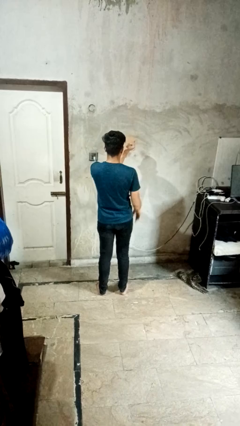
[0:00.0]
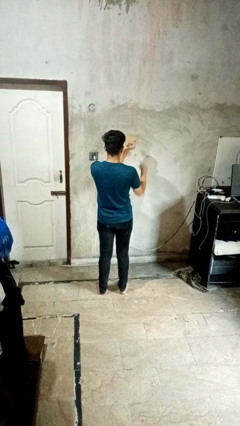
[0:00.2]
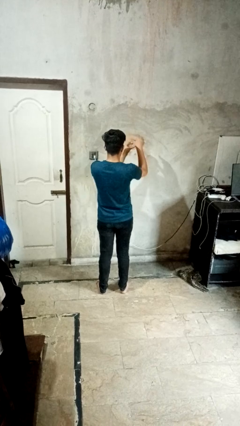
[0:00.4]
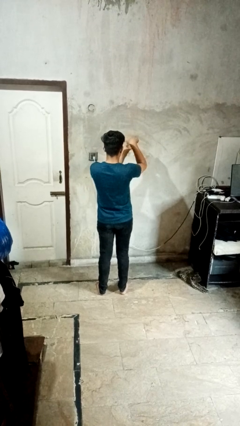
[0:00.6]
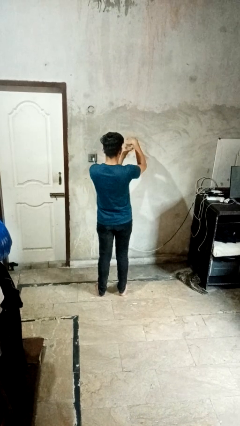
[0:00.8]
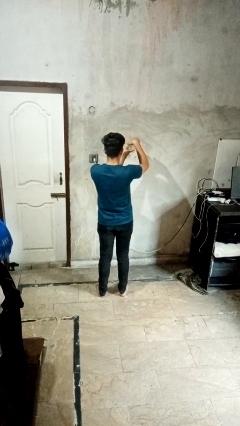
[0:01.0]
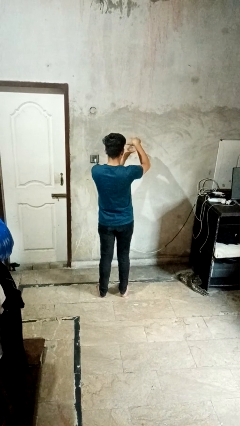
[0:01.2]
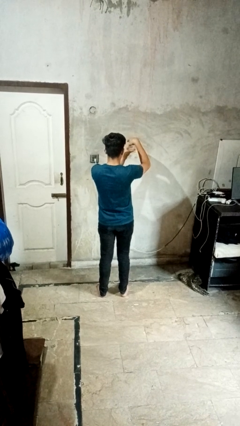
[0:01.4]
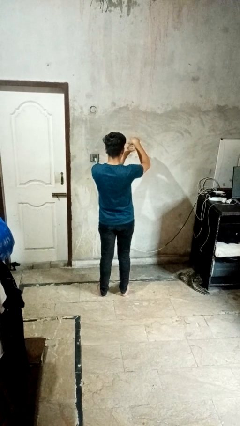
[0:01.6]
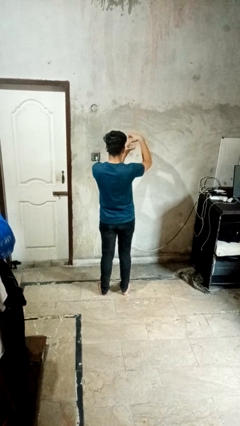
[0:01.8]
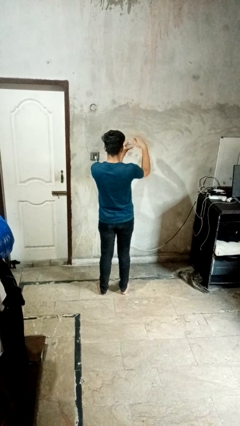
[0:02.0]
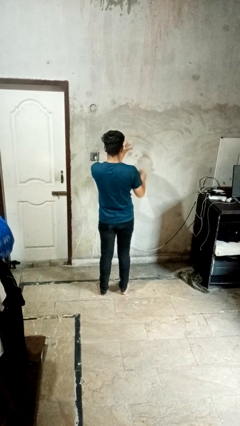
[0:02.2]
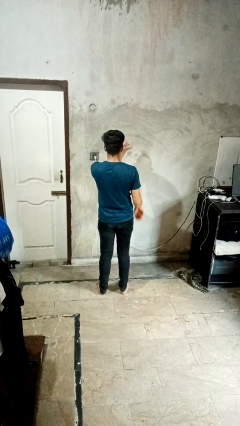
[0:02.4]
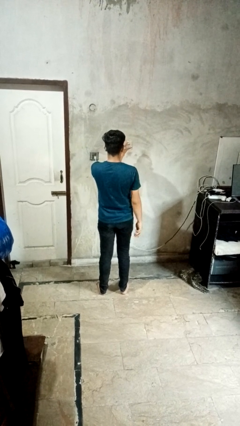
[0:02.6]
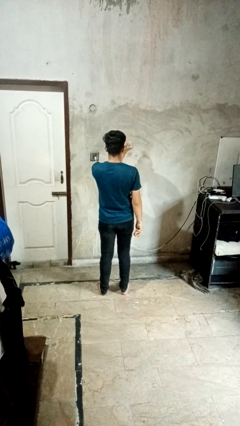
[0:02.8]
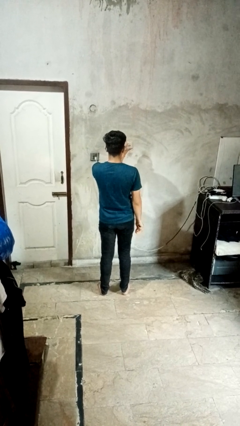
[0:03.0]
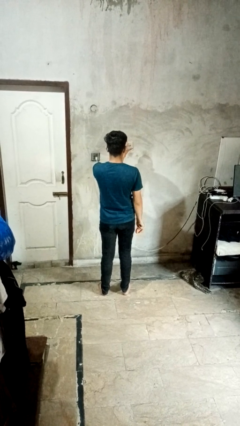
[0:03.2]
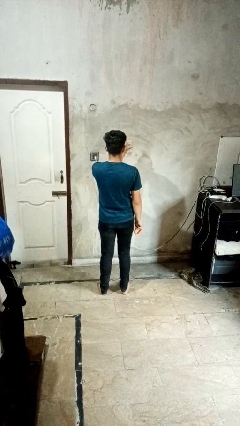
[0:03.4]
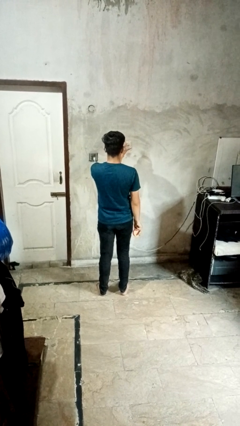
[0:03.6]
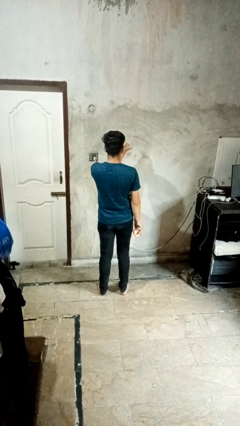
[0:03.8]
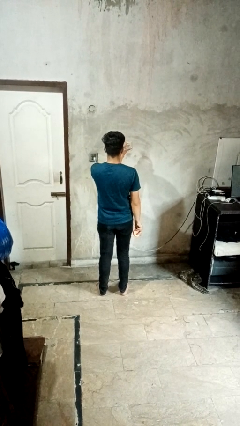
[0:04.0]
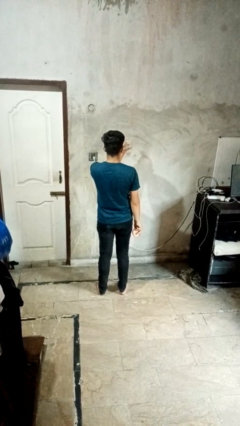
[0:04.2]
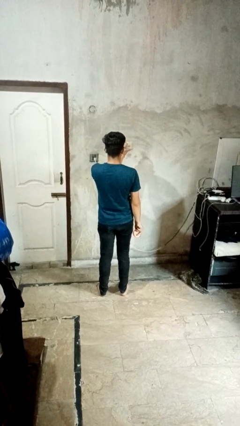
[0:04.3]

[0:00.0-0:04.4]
person opens jar

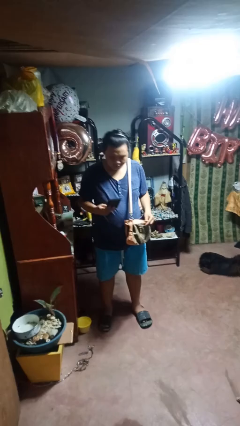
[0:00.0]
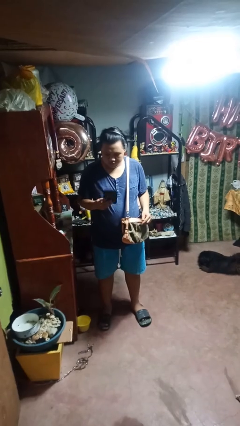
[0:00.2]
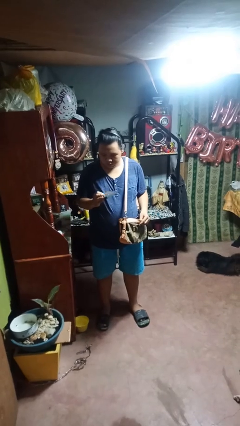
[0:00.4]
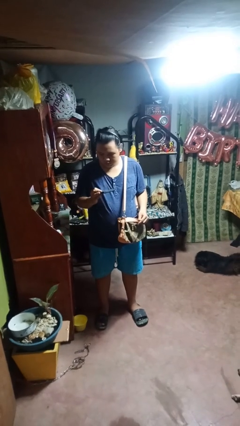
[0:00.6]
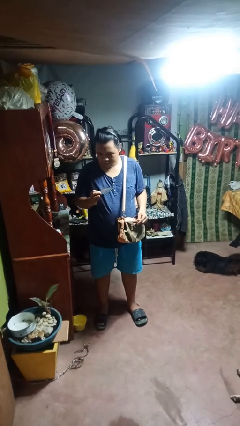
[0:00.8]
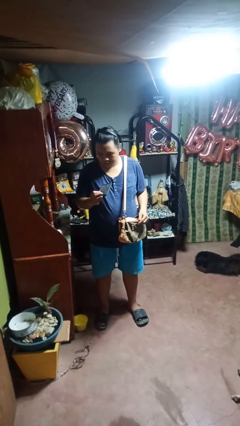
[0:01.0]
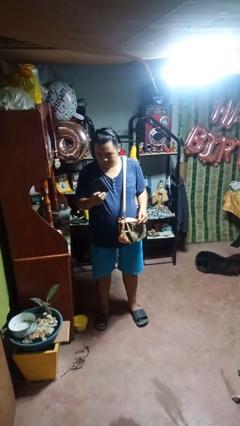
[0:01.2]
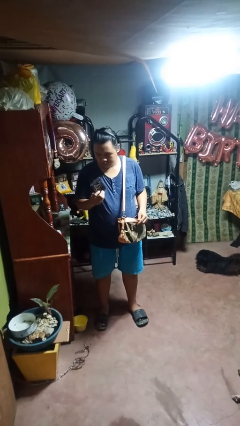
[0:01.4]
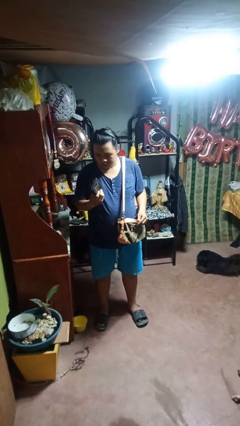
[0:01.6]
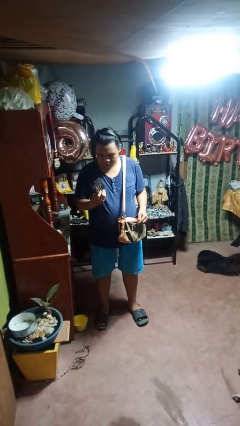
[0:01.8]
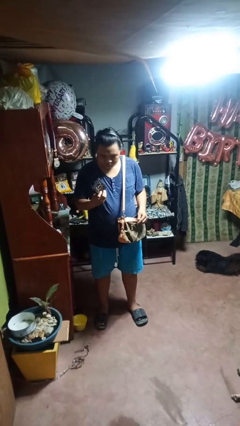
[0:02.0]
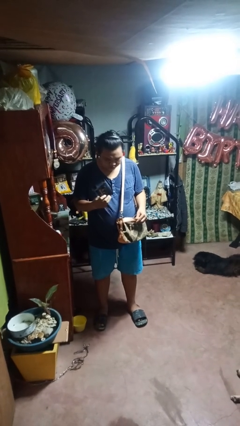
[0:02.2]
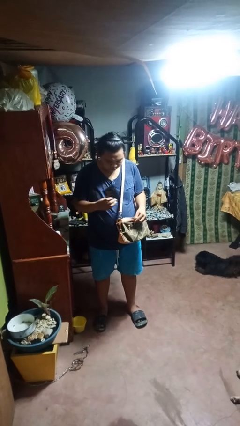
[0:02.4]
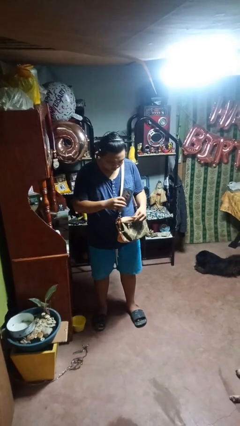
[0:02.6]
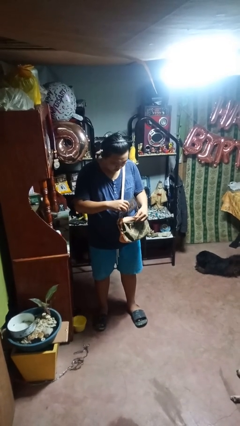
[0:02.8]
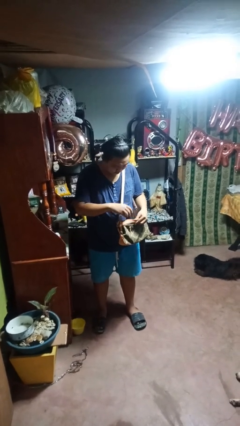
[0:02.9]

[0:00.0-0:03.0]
person takes object from purse

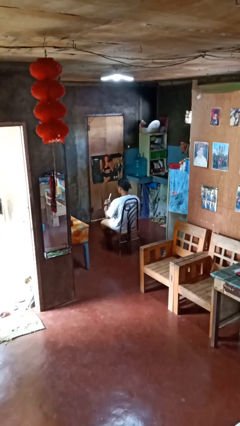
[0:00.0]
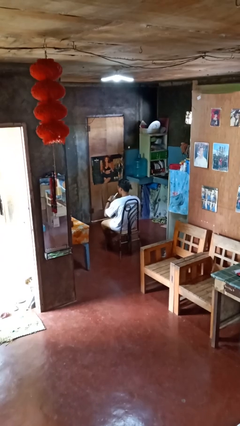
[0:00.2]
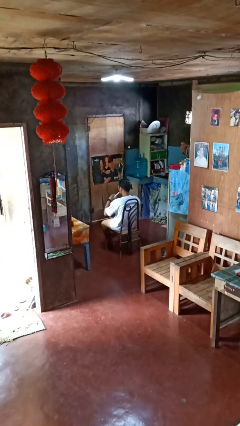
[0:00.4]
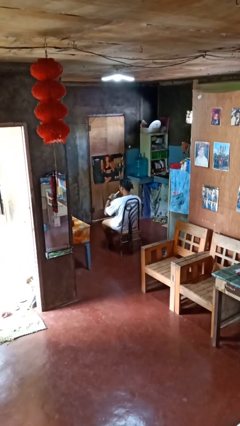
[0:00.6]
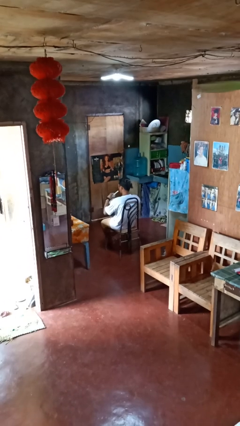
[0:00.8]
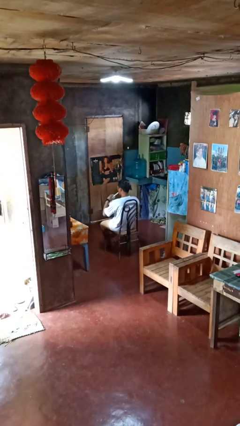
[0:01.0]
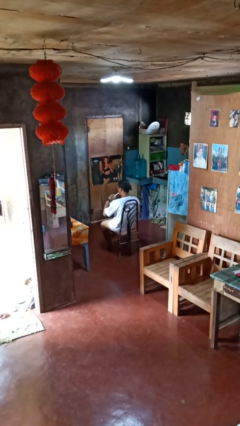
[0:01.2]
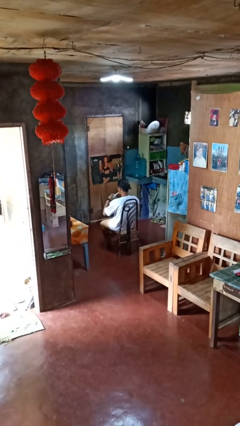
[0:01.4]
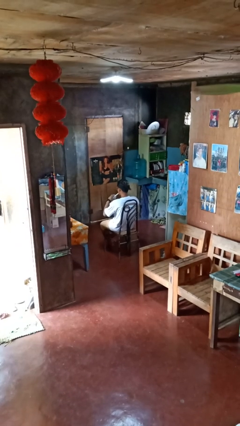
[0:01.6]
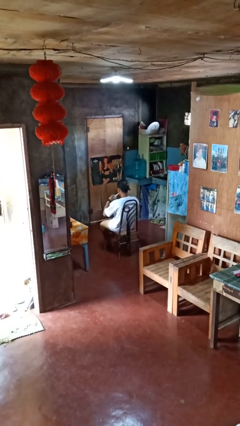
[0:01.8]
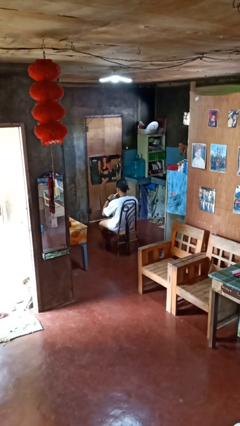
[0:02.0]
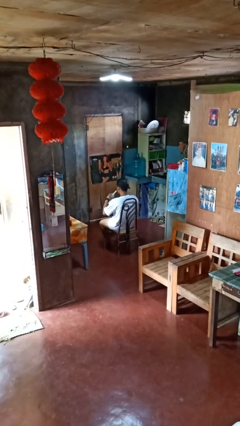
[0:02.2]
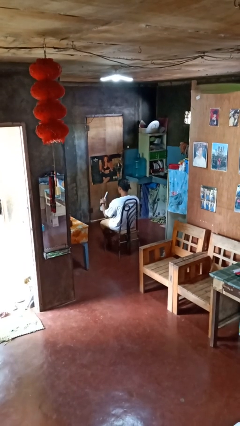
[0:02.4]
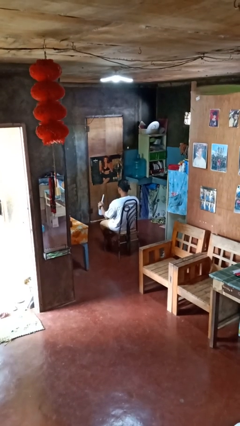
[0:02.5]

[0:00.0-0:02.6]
person drinks from straw

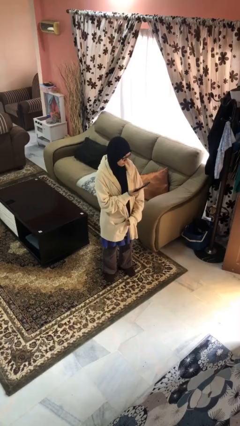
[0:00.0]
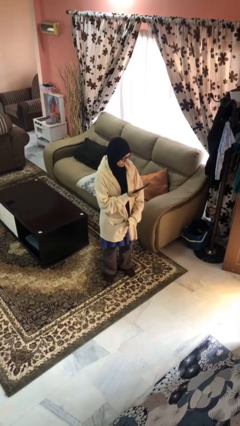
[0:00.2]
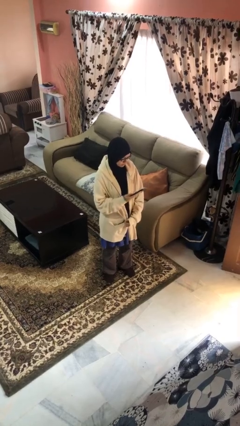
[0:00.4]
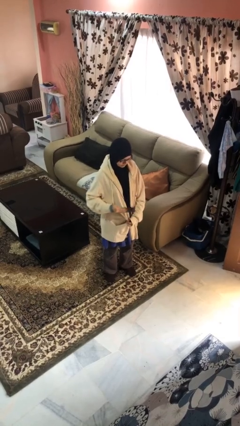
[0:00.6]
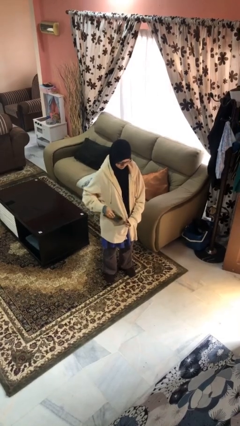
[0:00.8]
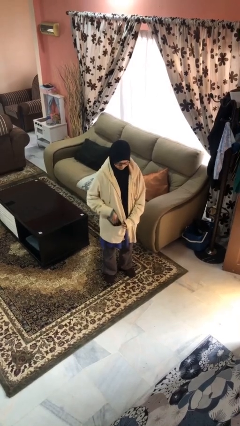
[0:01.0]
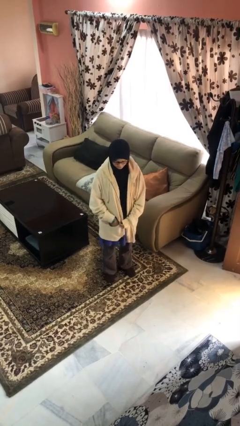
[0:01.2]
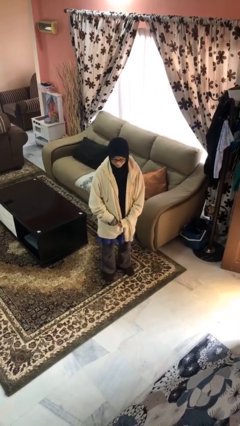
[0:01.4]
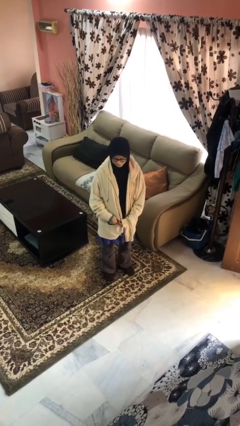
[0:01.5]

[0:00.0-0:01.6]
person puts phone into pocket

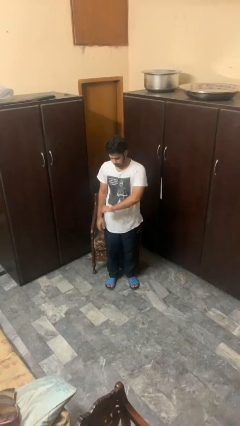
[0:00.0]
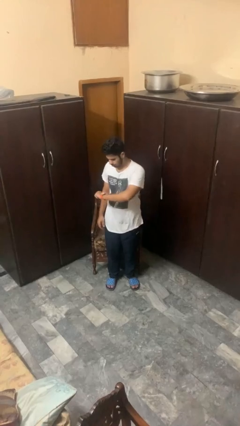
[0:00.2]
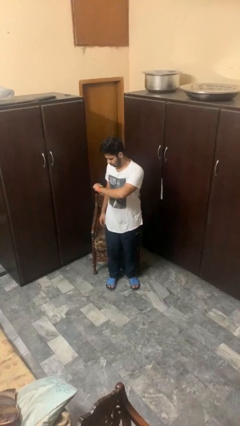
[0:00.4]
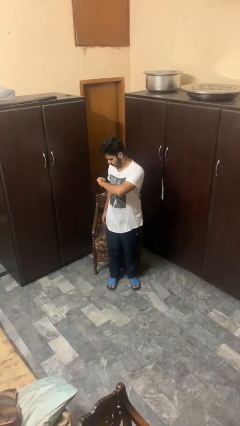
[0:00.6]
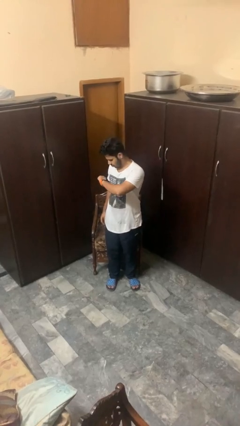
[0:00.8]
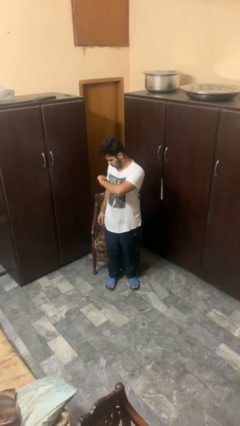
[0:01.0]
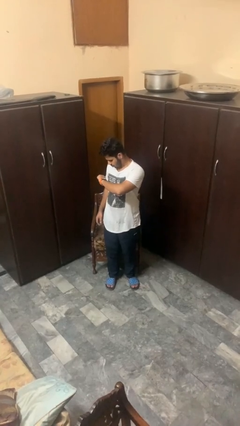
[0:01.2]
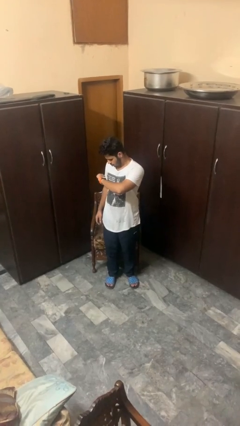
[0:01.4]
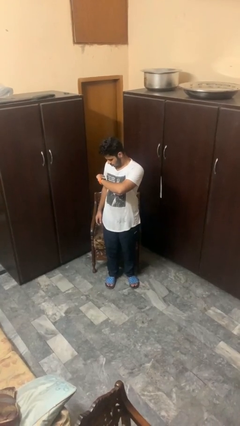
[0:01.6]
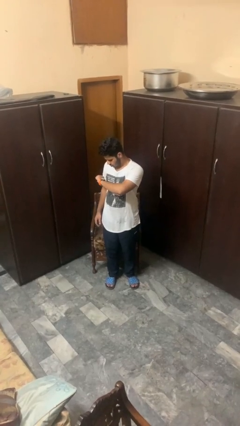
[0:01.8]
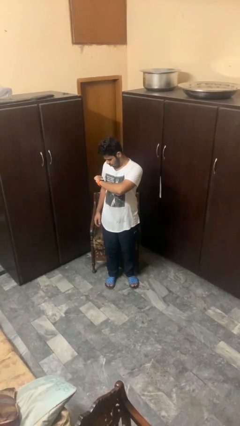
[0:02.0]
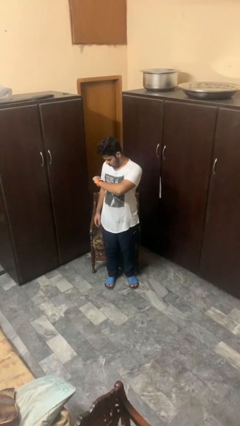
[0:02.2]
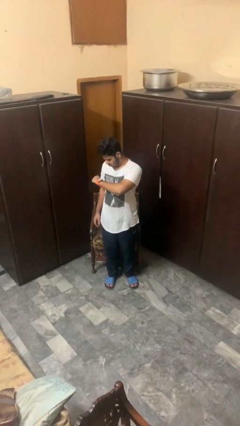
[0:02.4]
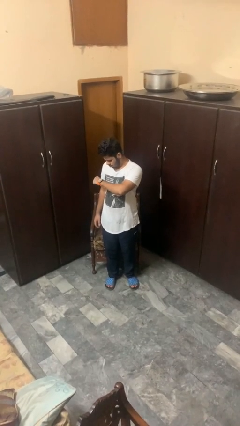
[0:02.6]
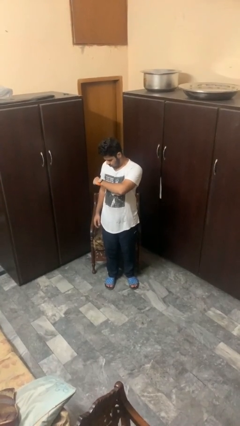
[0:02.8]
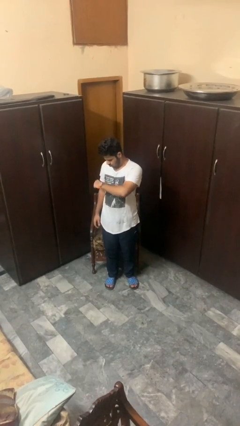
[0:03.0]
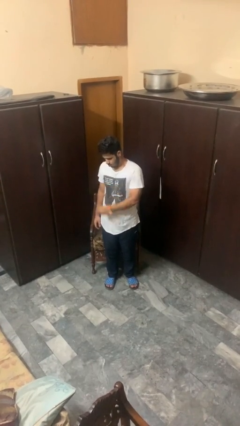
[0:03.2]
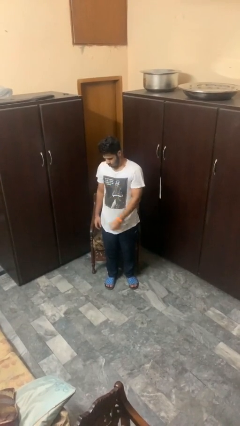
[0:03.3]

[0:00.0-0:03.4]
person looks at wristwatch

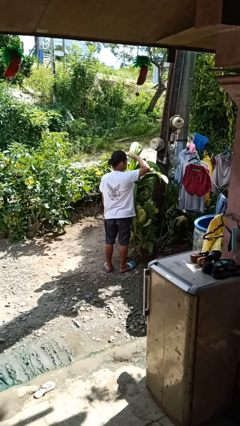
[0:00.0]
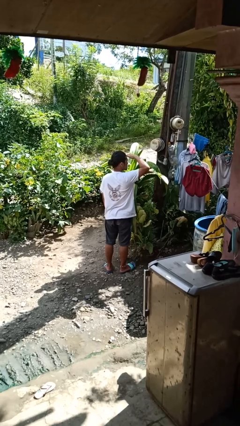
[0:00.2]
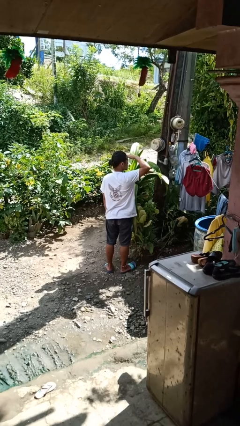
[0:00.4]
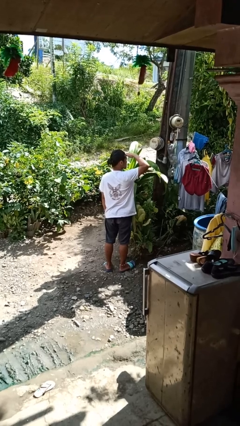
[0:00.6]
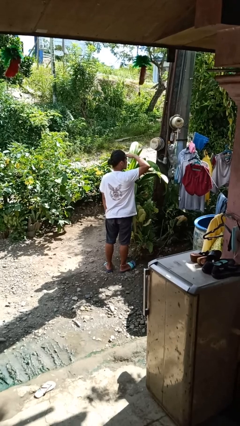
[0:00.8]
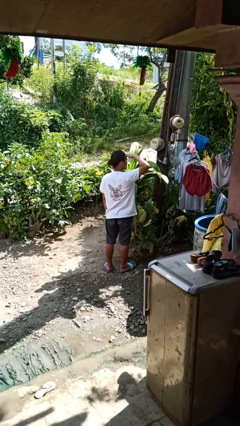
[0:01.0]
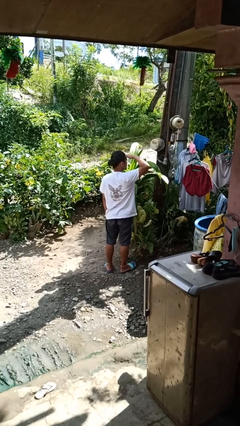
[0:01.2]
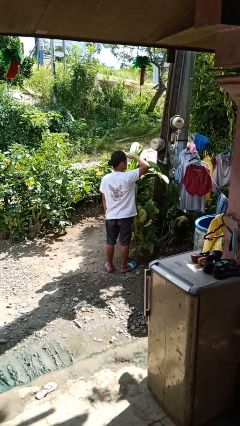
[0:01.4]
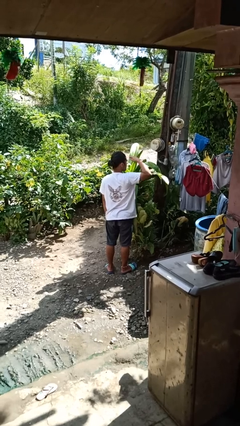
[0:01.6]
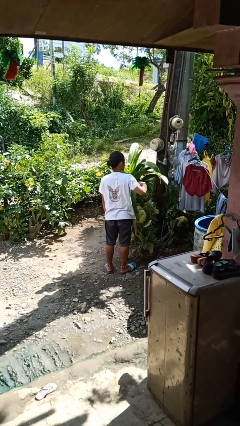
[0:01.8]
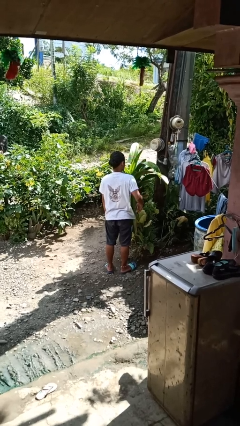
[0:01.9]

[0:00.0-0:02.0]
person shades eyes

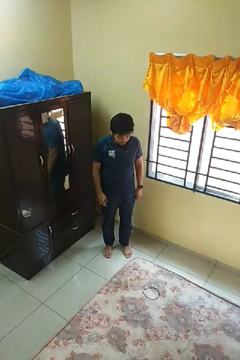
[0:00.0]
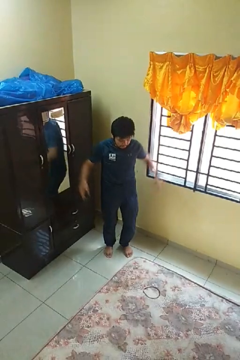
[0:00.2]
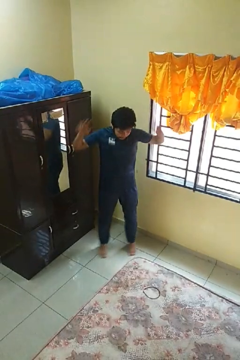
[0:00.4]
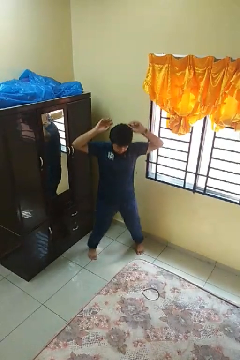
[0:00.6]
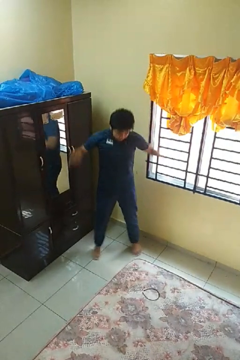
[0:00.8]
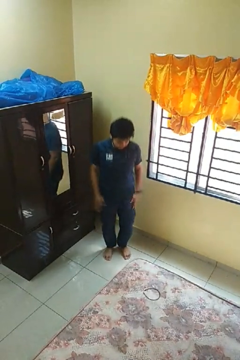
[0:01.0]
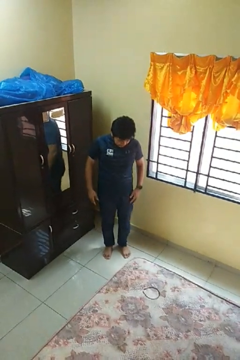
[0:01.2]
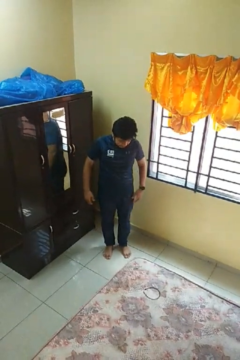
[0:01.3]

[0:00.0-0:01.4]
person exercises with jumping jacks
